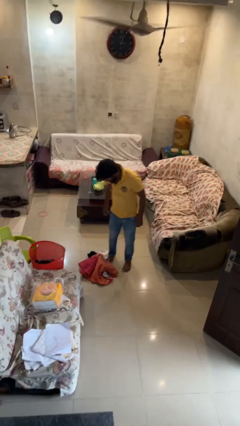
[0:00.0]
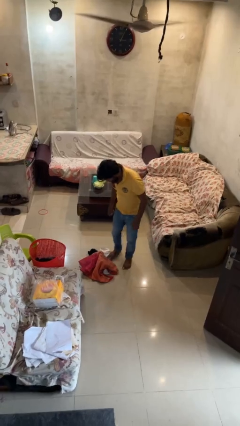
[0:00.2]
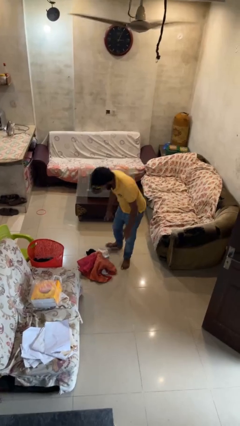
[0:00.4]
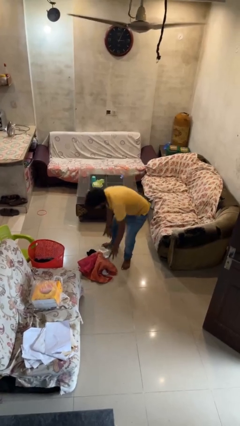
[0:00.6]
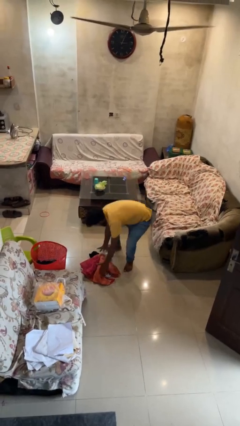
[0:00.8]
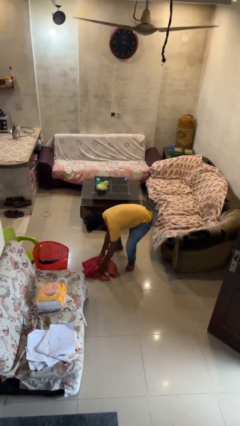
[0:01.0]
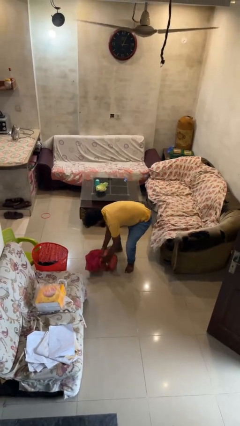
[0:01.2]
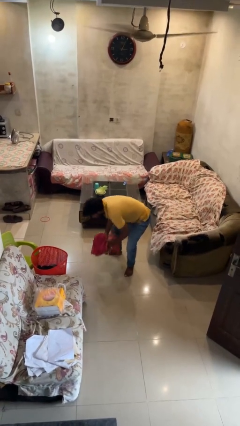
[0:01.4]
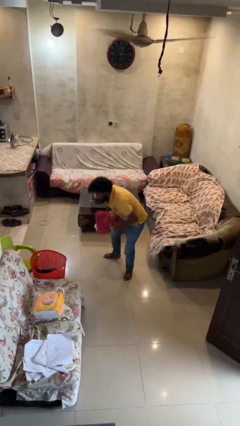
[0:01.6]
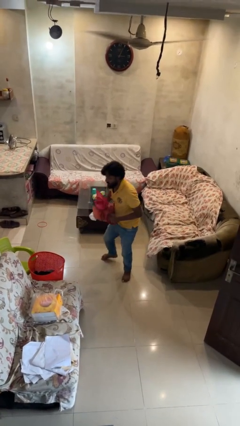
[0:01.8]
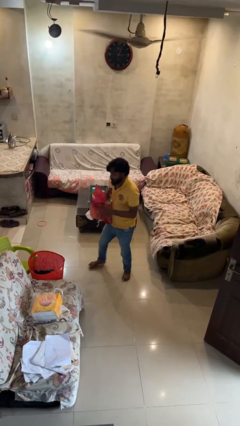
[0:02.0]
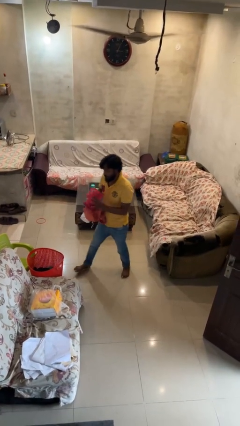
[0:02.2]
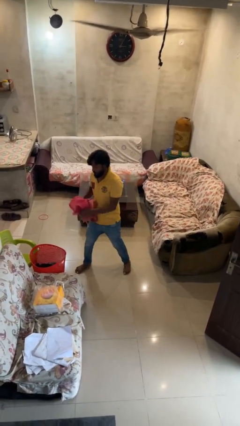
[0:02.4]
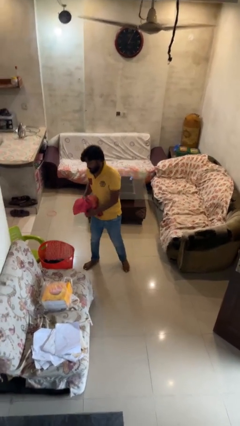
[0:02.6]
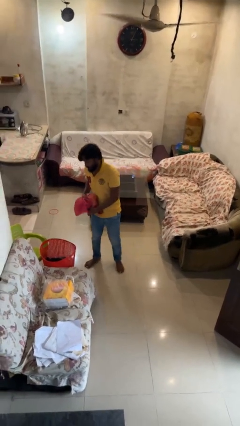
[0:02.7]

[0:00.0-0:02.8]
person picks up object from floor

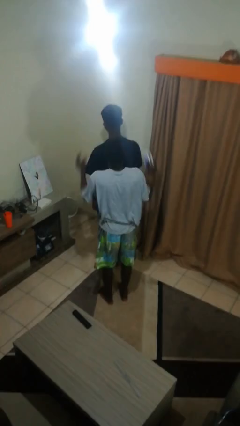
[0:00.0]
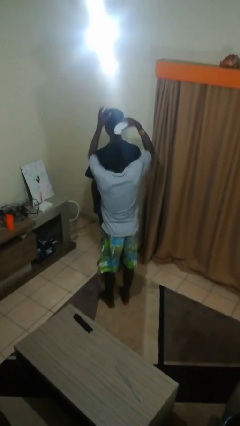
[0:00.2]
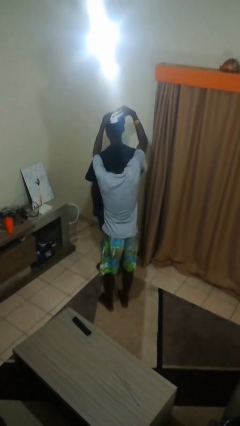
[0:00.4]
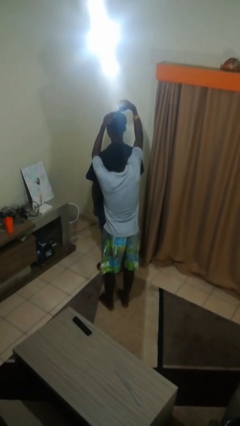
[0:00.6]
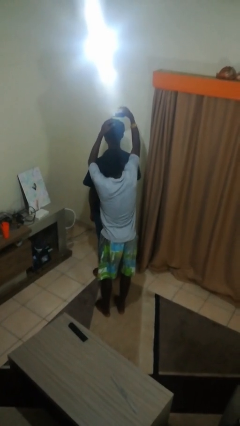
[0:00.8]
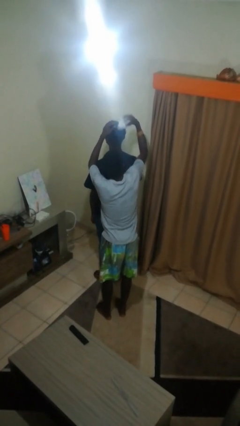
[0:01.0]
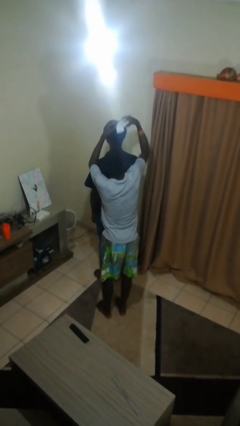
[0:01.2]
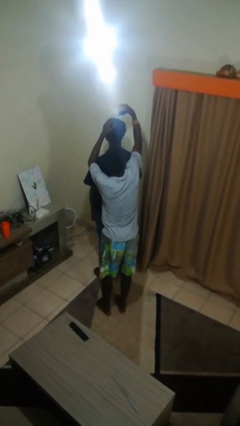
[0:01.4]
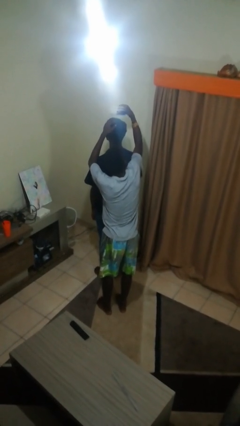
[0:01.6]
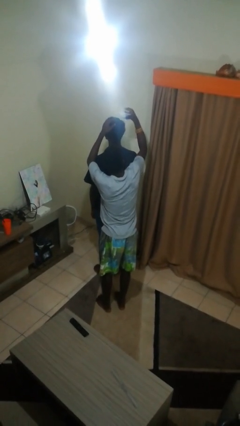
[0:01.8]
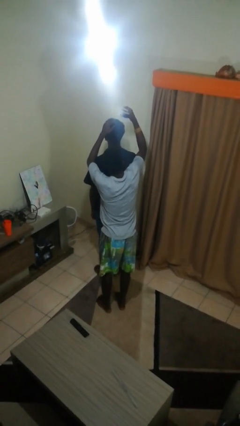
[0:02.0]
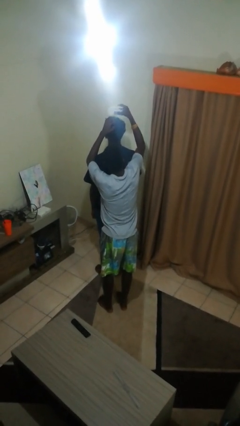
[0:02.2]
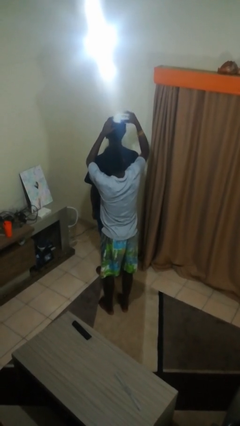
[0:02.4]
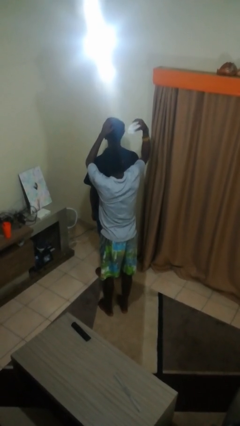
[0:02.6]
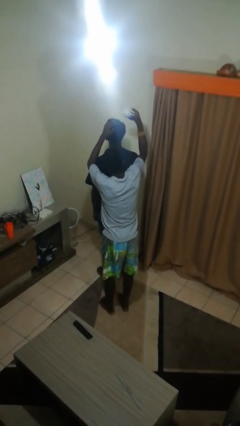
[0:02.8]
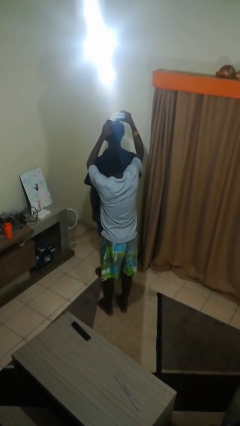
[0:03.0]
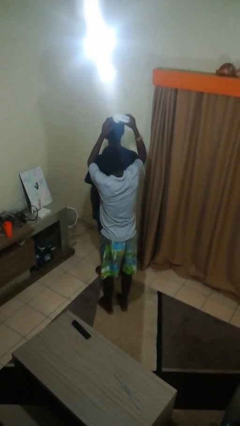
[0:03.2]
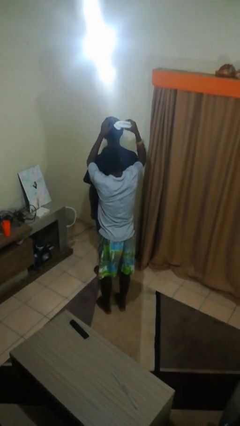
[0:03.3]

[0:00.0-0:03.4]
person brushes hair of person

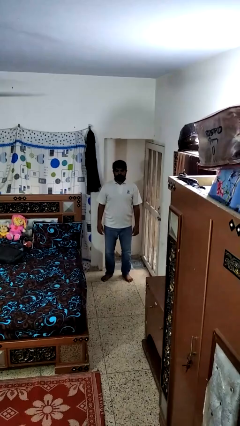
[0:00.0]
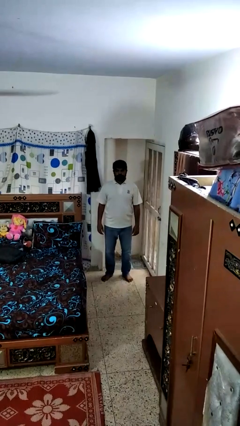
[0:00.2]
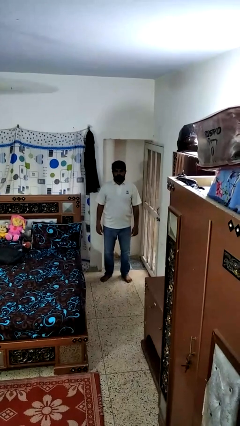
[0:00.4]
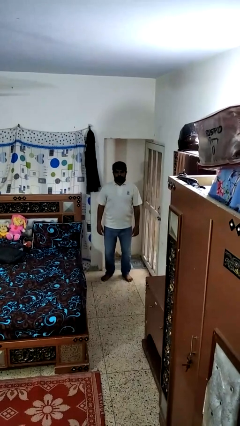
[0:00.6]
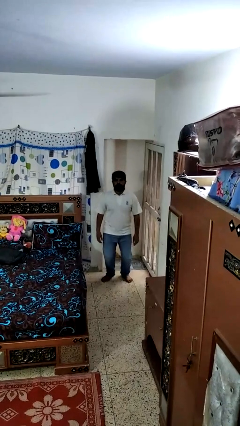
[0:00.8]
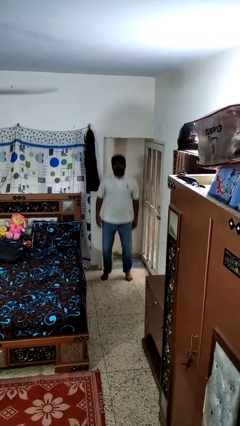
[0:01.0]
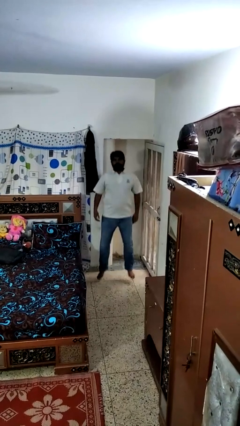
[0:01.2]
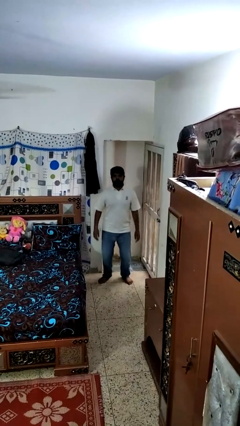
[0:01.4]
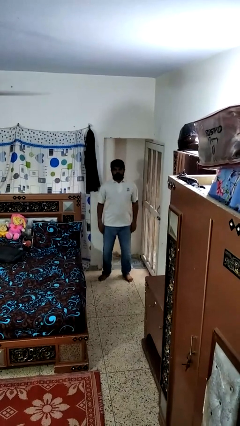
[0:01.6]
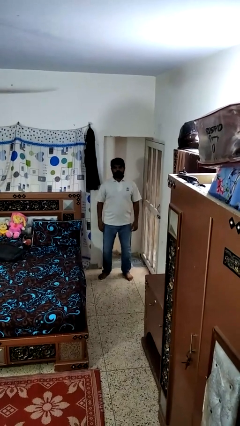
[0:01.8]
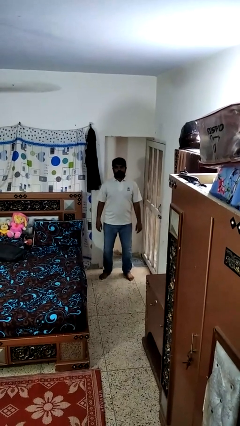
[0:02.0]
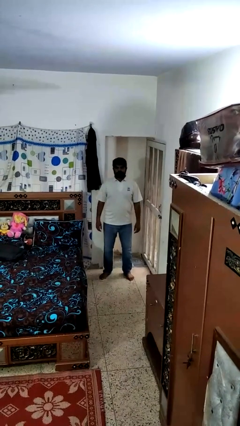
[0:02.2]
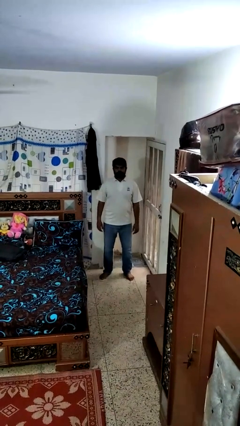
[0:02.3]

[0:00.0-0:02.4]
person jumps

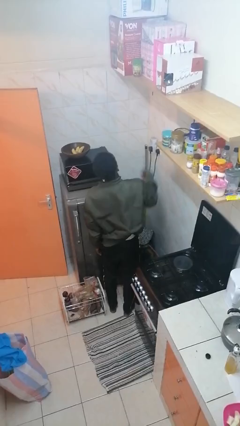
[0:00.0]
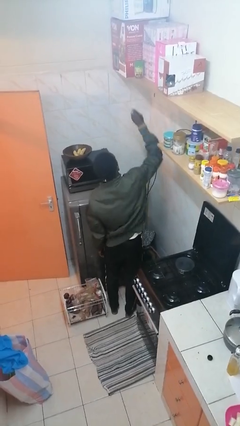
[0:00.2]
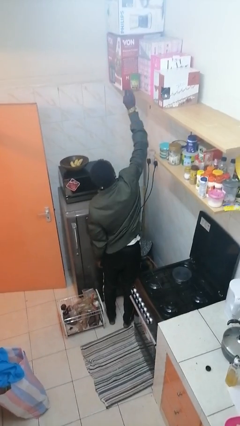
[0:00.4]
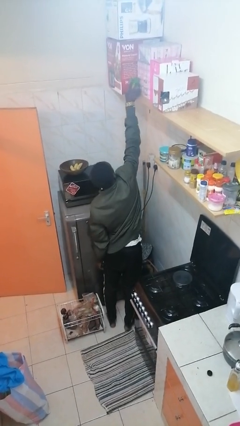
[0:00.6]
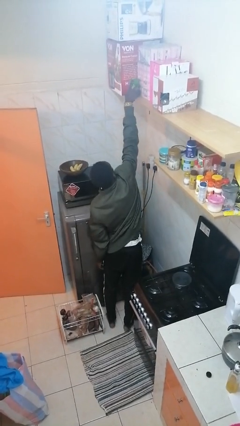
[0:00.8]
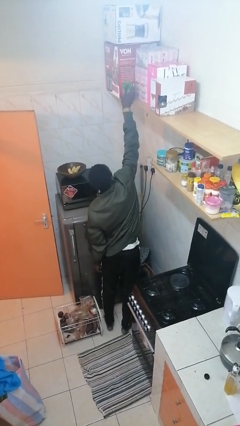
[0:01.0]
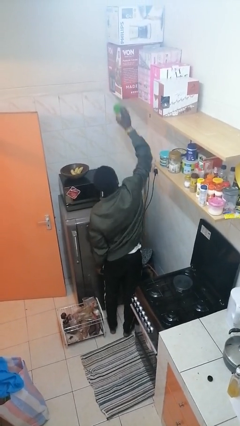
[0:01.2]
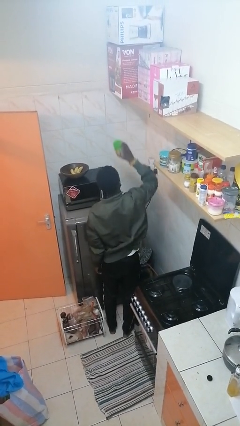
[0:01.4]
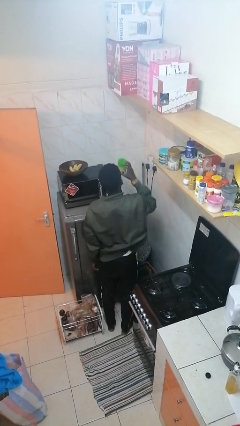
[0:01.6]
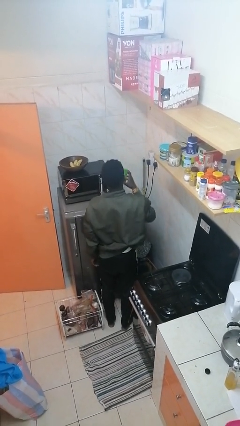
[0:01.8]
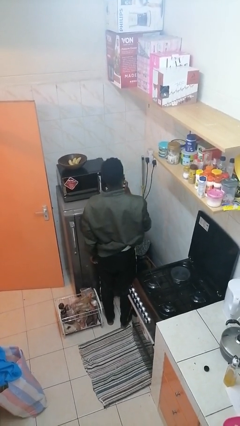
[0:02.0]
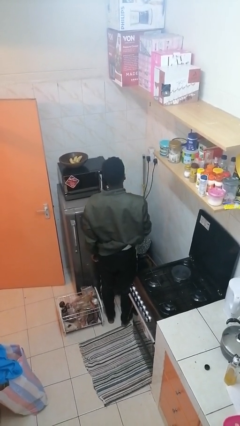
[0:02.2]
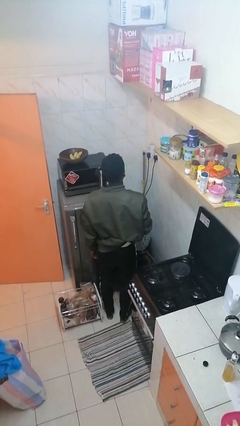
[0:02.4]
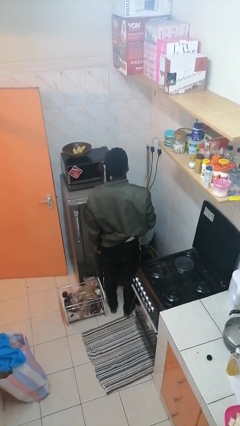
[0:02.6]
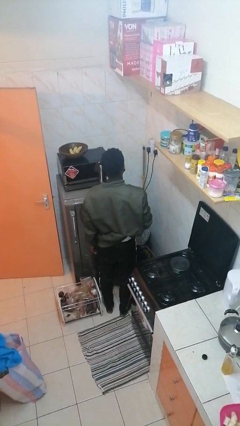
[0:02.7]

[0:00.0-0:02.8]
person picks up object from shelf

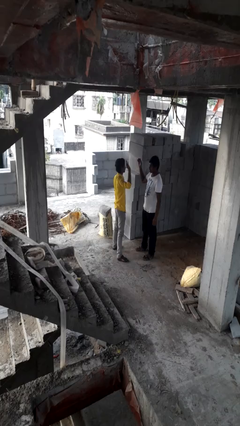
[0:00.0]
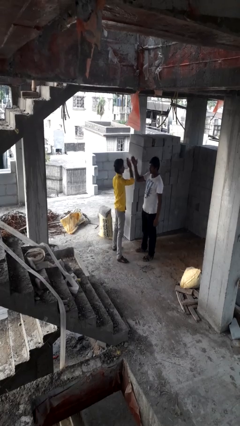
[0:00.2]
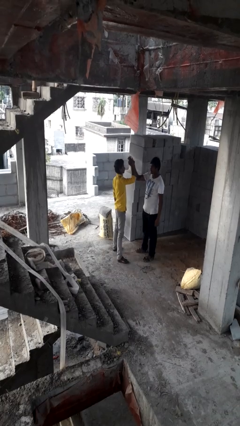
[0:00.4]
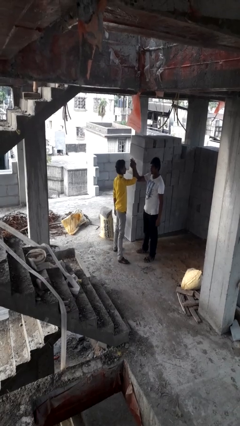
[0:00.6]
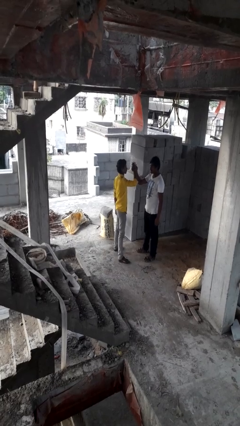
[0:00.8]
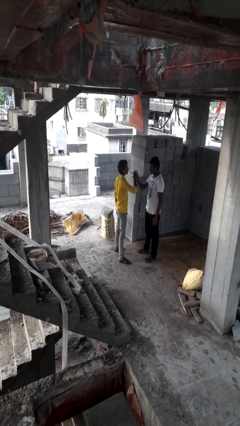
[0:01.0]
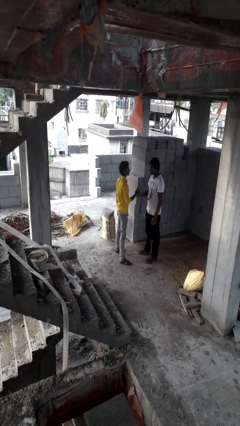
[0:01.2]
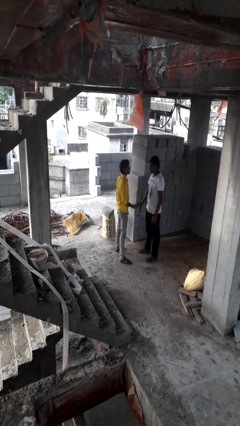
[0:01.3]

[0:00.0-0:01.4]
person highfives hand

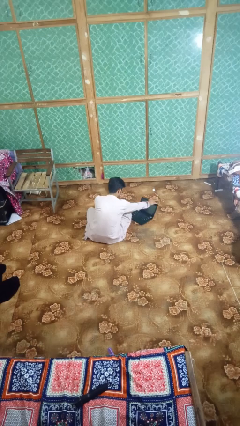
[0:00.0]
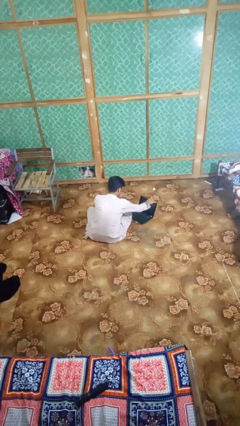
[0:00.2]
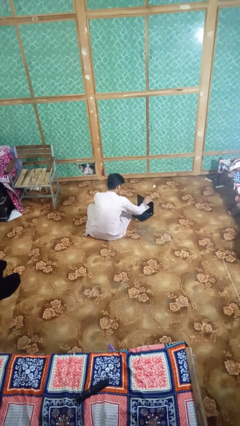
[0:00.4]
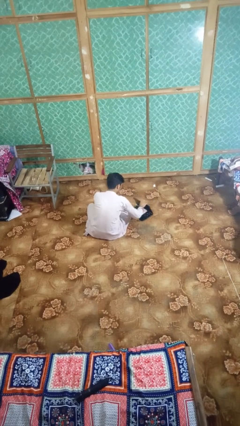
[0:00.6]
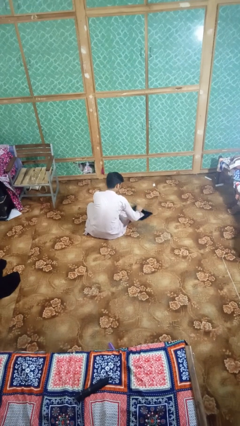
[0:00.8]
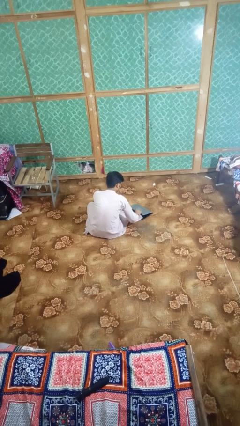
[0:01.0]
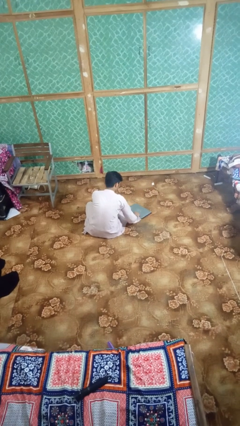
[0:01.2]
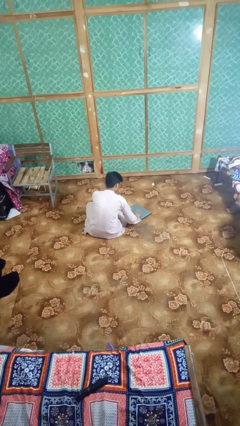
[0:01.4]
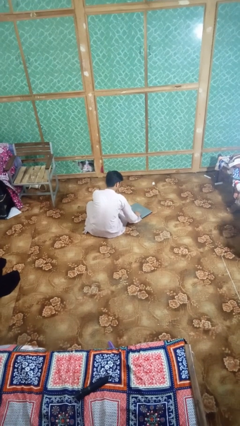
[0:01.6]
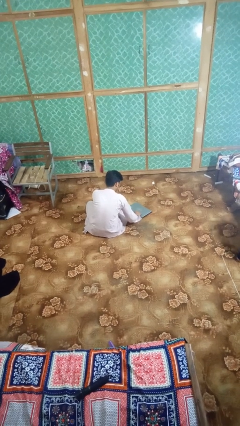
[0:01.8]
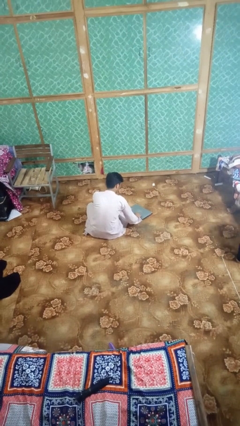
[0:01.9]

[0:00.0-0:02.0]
person closes laptop

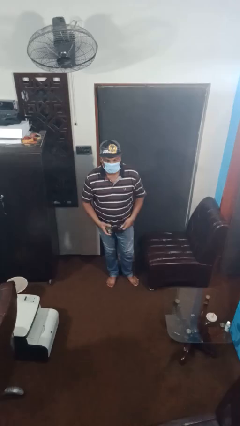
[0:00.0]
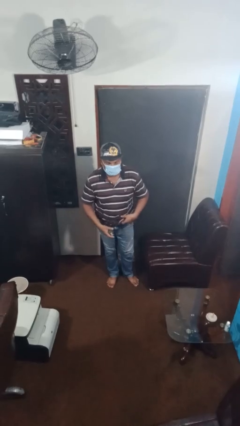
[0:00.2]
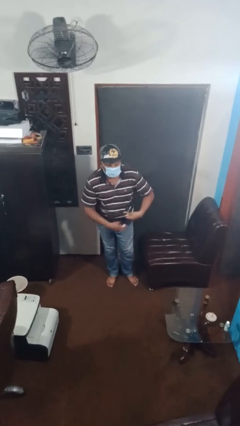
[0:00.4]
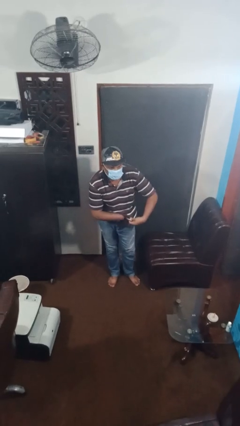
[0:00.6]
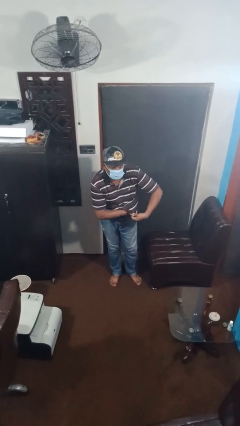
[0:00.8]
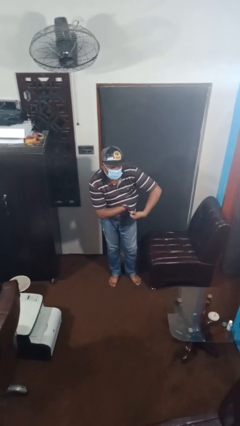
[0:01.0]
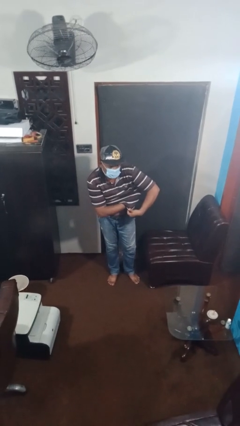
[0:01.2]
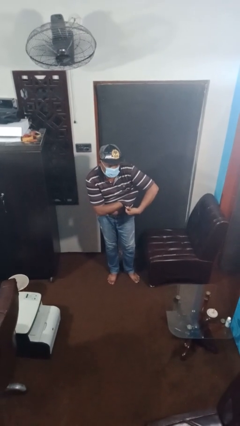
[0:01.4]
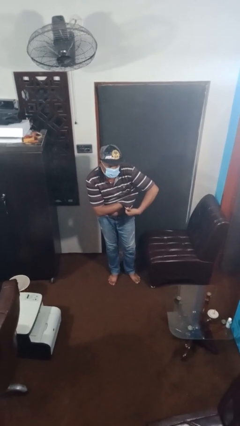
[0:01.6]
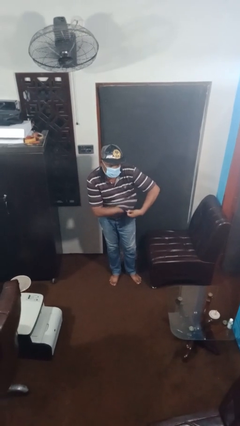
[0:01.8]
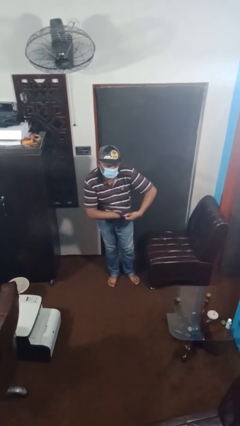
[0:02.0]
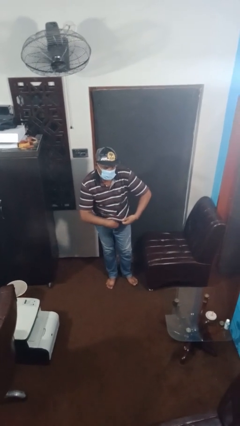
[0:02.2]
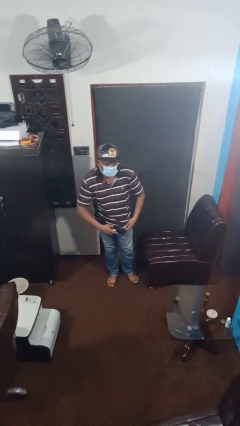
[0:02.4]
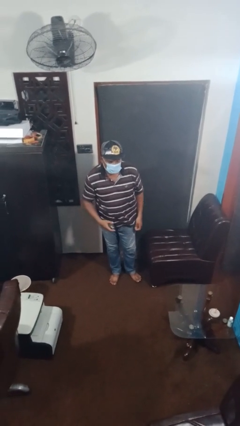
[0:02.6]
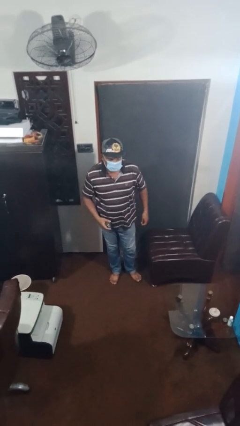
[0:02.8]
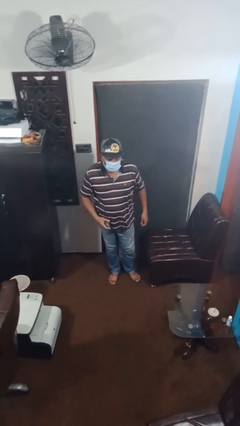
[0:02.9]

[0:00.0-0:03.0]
person applies deodorant
